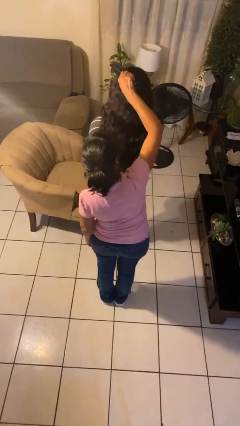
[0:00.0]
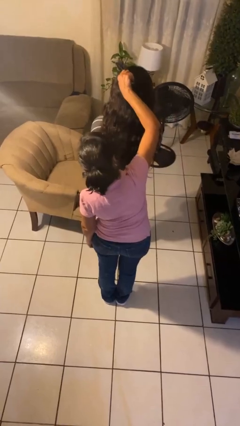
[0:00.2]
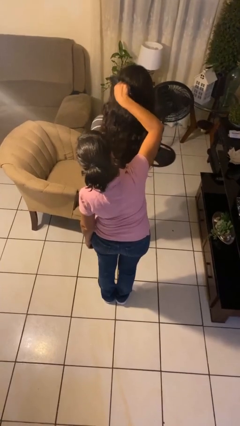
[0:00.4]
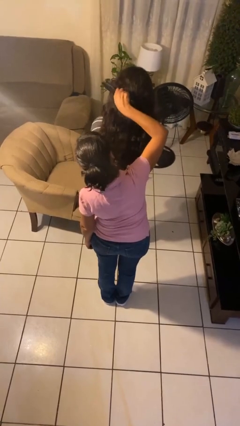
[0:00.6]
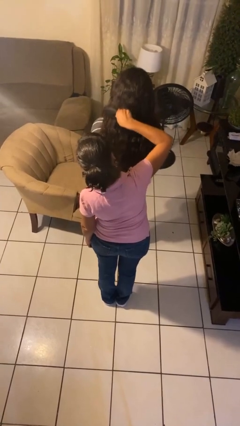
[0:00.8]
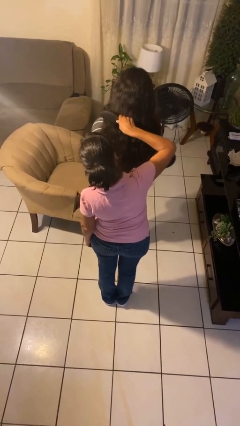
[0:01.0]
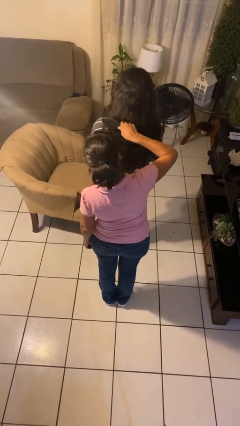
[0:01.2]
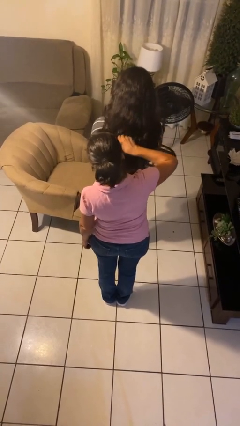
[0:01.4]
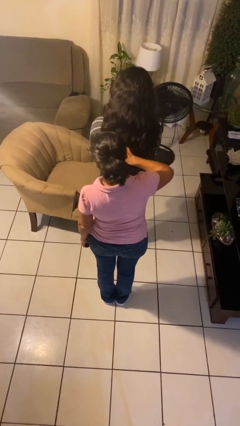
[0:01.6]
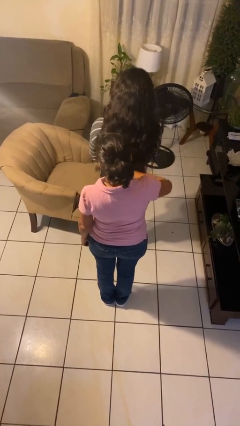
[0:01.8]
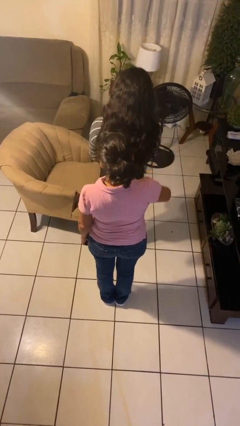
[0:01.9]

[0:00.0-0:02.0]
person brushes hair of person

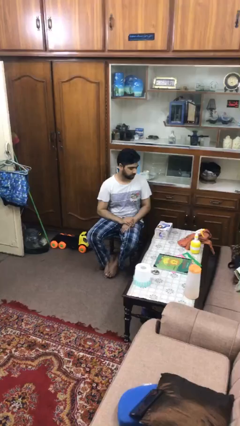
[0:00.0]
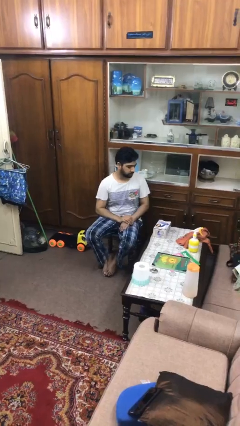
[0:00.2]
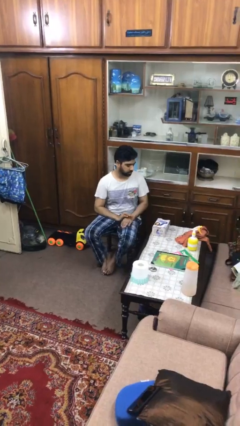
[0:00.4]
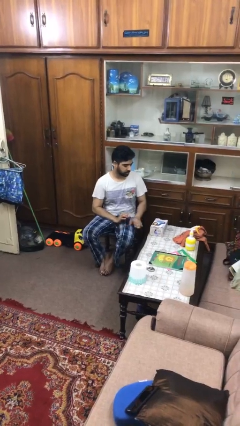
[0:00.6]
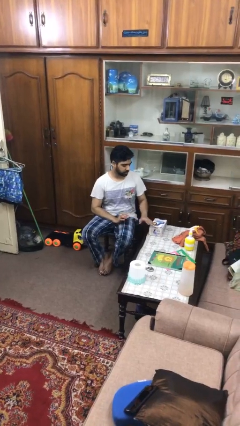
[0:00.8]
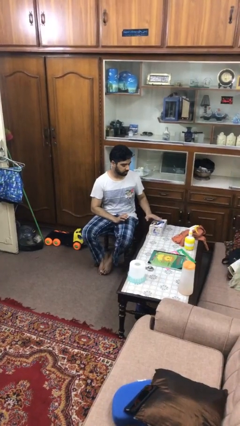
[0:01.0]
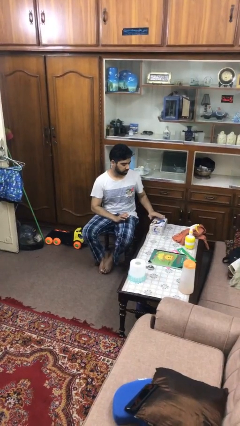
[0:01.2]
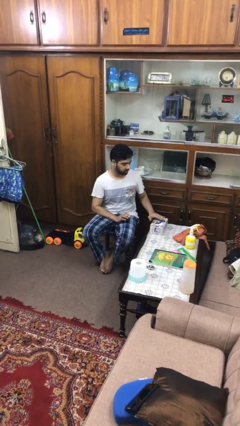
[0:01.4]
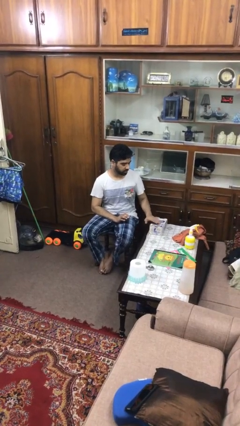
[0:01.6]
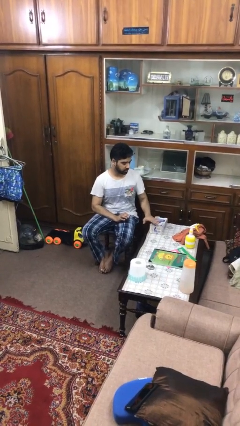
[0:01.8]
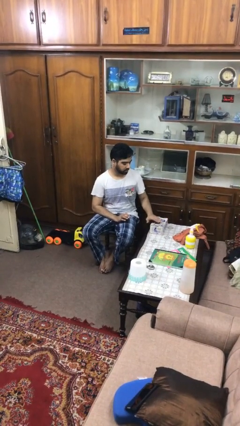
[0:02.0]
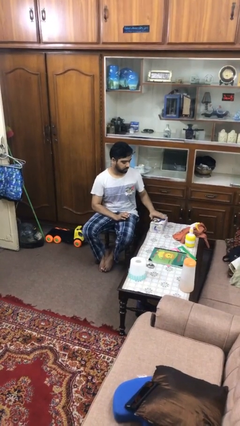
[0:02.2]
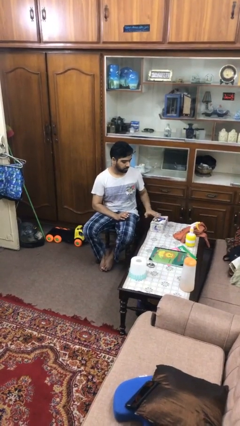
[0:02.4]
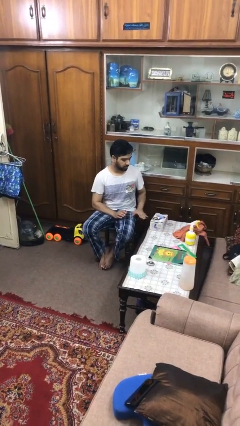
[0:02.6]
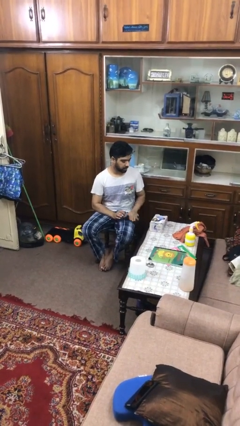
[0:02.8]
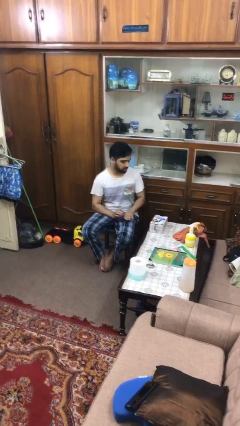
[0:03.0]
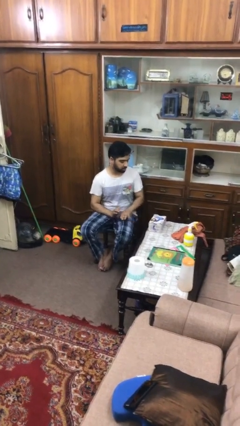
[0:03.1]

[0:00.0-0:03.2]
person waves hand over object

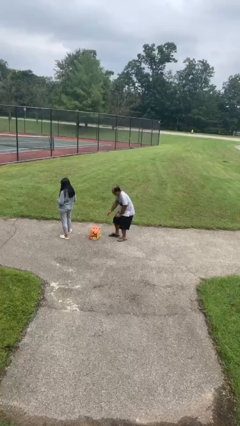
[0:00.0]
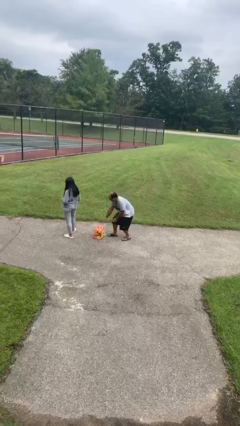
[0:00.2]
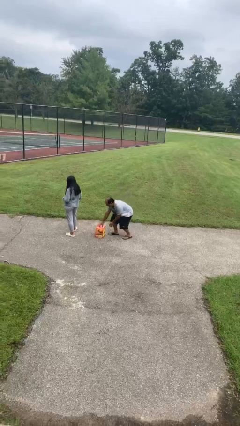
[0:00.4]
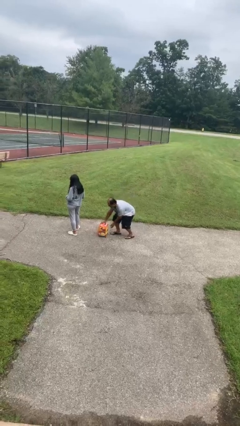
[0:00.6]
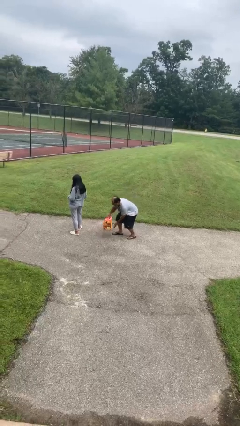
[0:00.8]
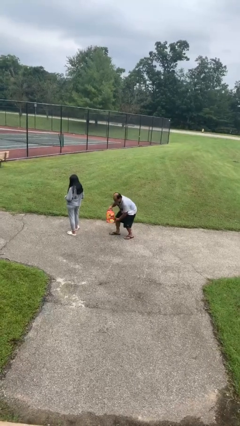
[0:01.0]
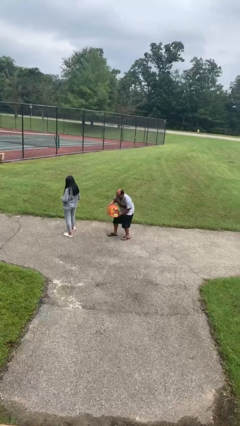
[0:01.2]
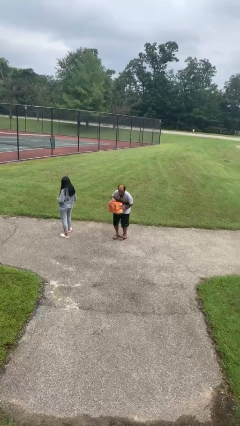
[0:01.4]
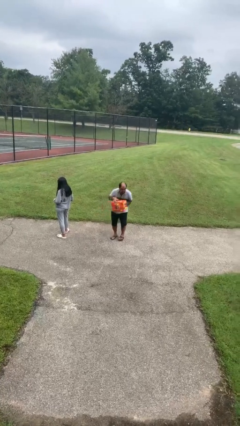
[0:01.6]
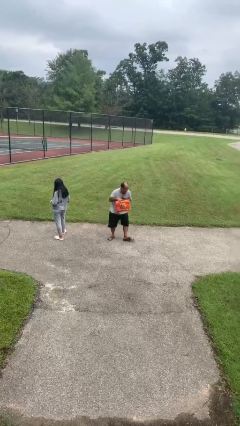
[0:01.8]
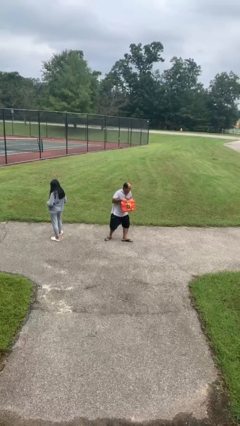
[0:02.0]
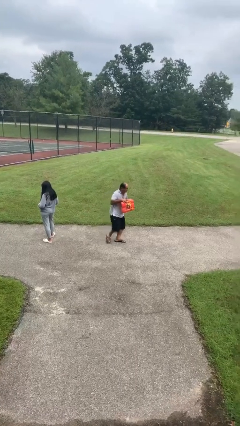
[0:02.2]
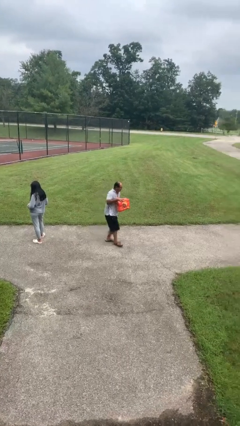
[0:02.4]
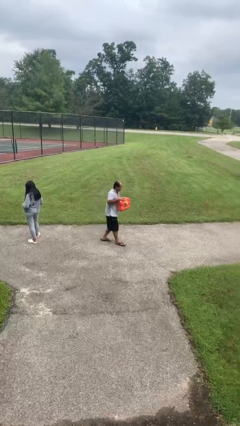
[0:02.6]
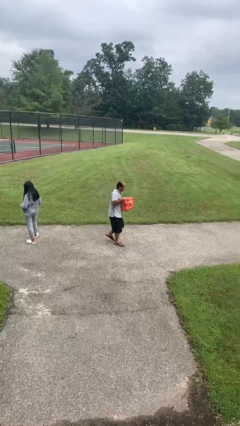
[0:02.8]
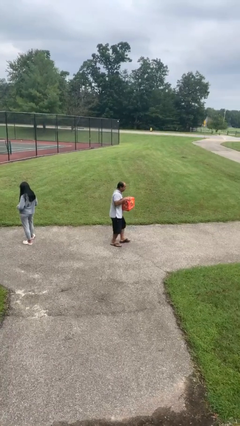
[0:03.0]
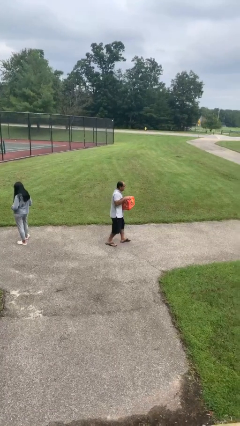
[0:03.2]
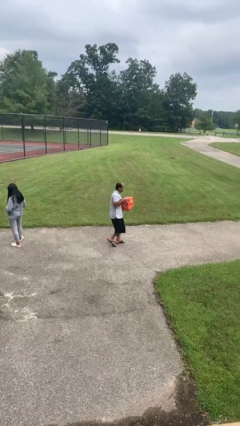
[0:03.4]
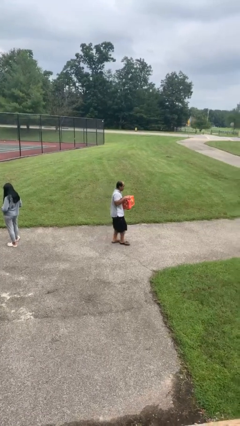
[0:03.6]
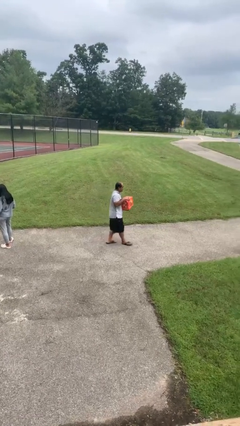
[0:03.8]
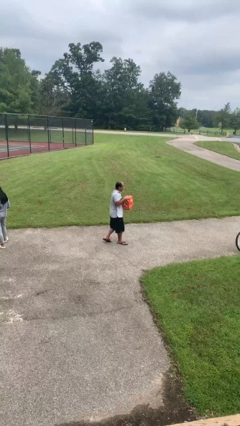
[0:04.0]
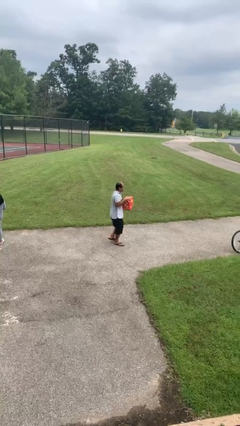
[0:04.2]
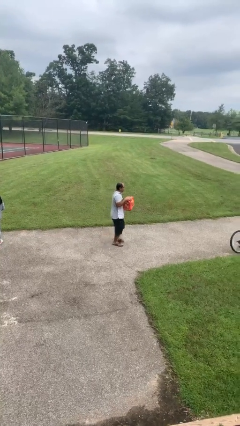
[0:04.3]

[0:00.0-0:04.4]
person steals object from person

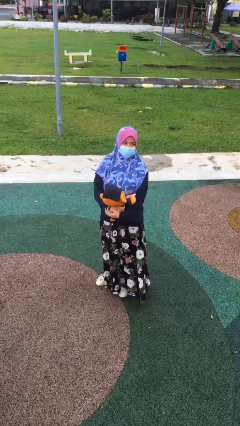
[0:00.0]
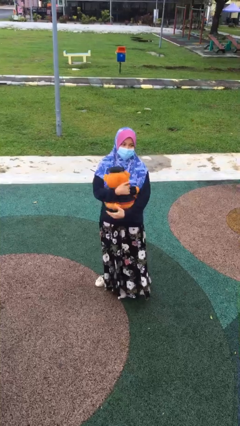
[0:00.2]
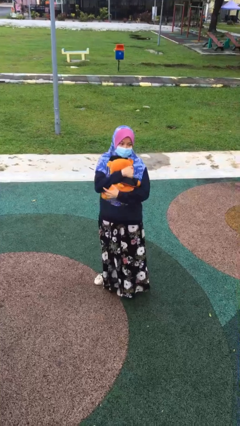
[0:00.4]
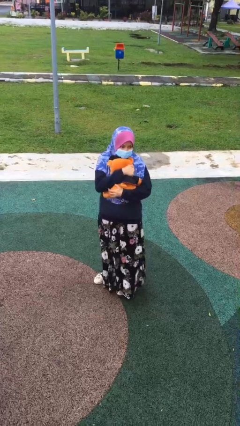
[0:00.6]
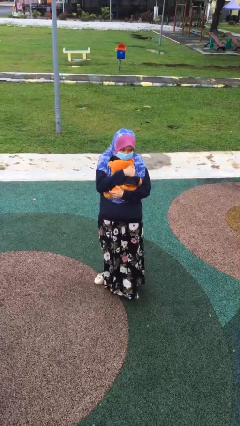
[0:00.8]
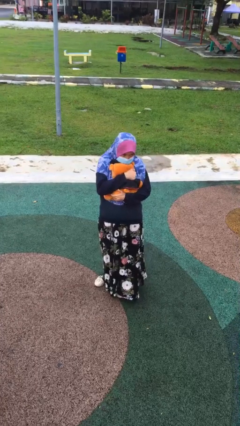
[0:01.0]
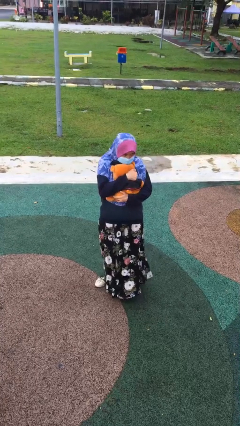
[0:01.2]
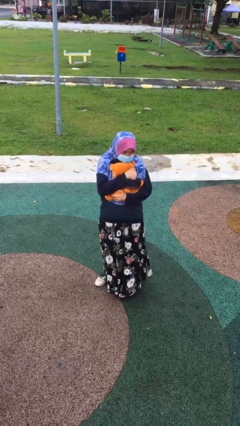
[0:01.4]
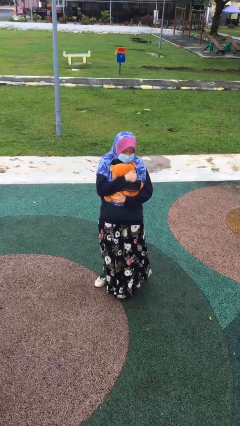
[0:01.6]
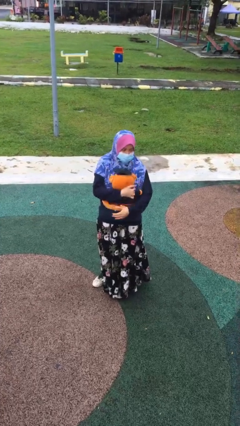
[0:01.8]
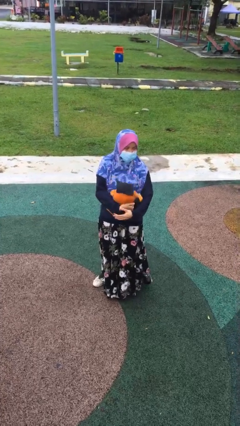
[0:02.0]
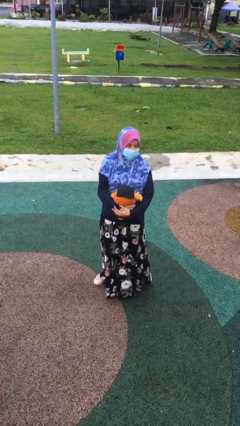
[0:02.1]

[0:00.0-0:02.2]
person hugs stuffed animal

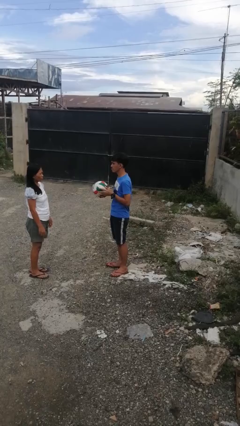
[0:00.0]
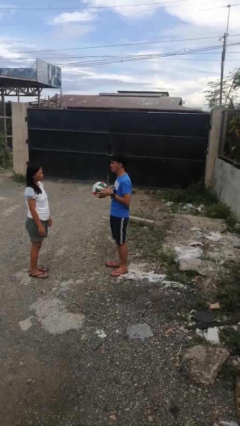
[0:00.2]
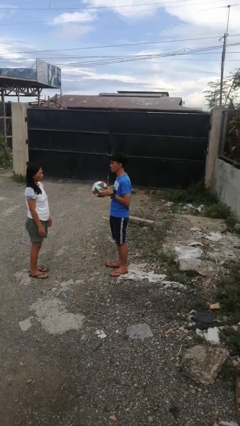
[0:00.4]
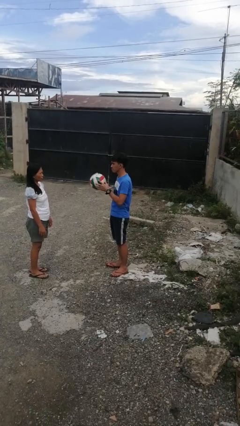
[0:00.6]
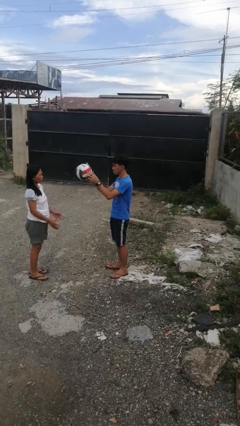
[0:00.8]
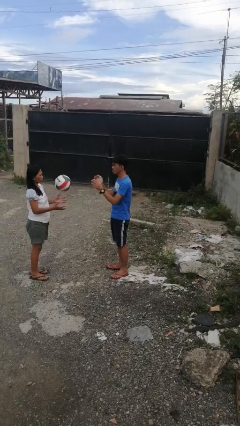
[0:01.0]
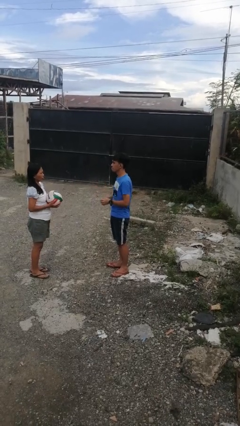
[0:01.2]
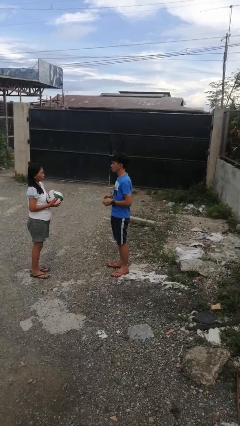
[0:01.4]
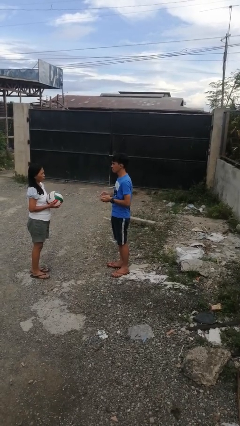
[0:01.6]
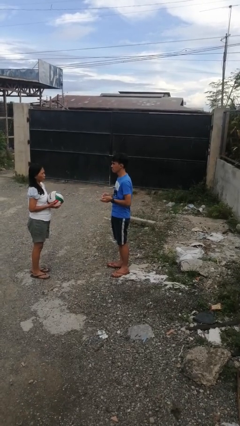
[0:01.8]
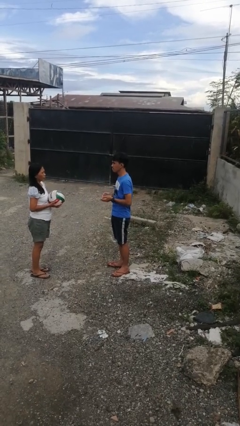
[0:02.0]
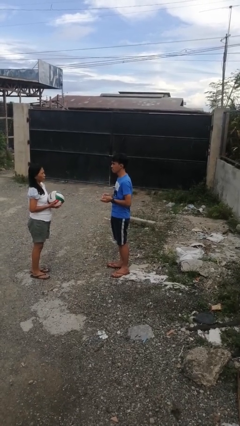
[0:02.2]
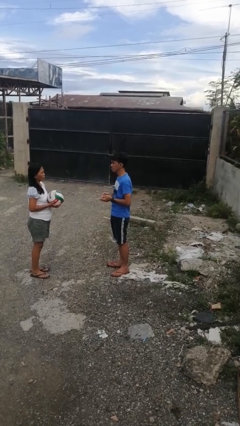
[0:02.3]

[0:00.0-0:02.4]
person throws object to person

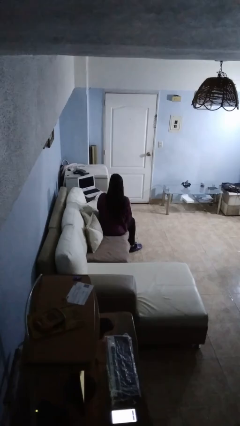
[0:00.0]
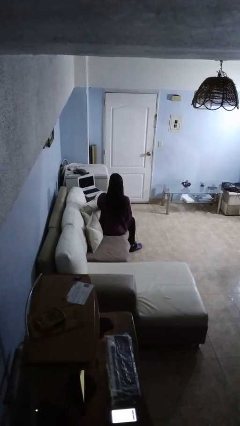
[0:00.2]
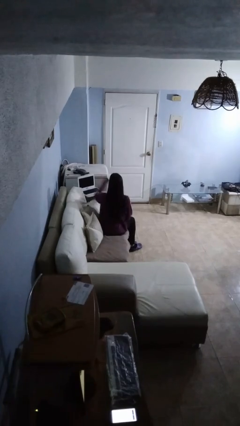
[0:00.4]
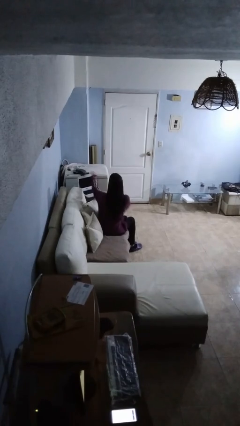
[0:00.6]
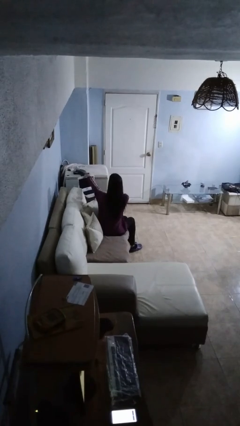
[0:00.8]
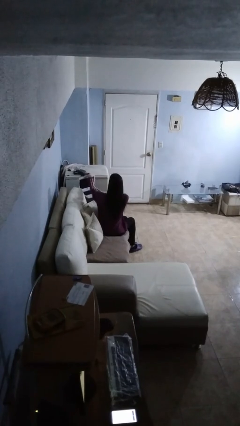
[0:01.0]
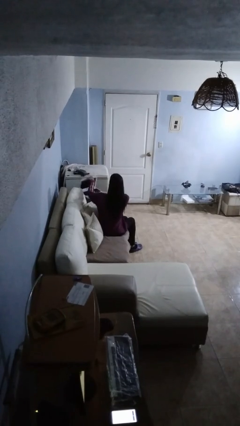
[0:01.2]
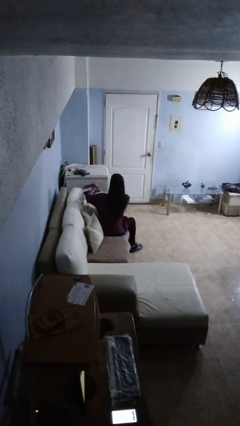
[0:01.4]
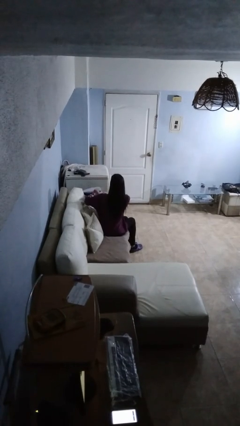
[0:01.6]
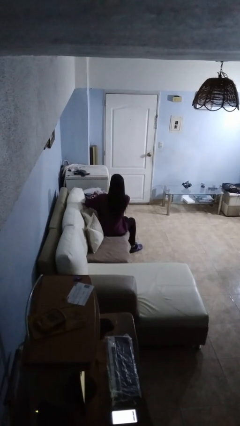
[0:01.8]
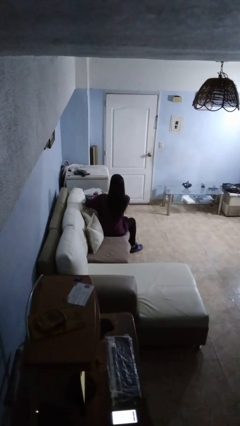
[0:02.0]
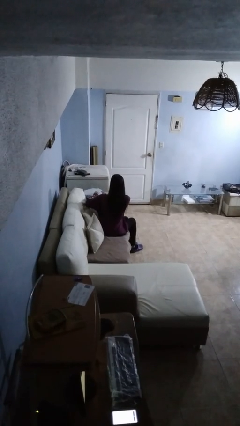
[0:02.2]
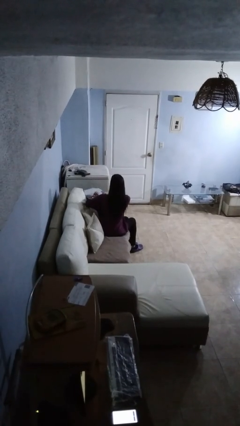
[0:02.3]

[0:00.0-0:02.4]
person closes laptop

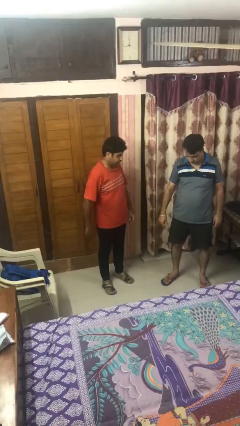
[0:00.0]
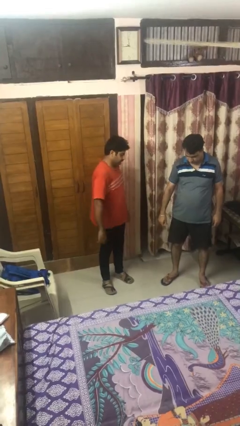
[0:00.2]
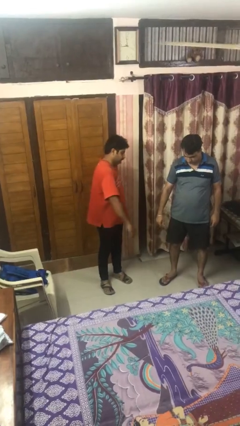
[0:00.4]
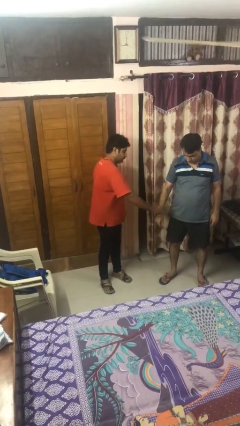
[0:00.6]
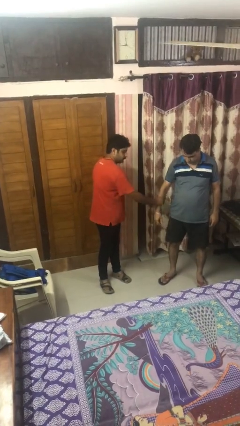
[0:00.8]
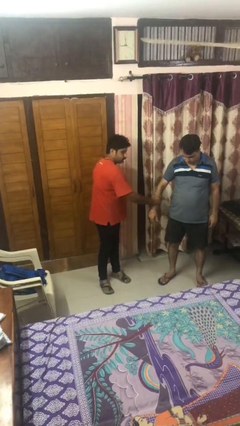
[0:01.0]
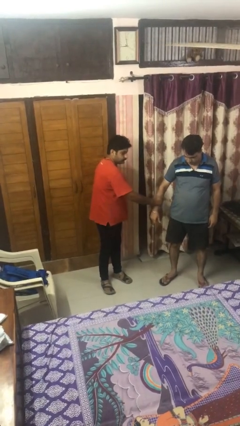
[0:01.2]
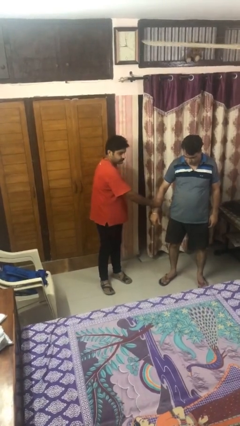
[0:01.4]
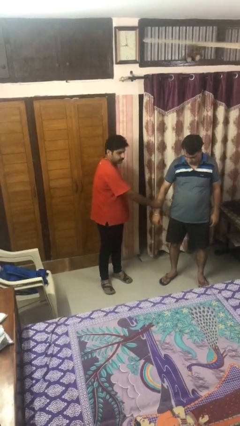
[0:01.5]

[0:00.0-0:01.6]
person grabs person by forearm
